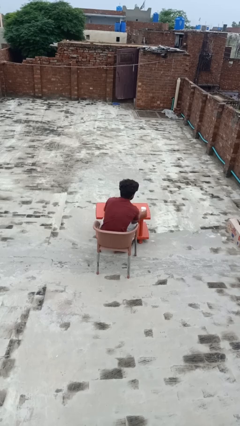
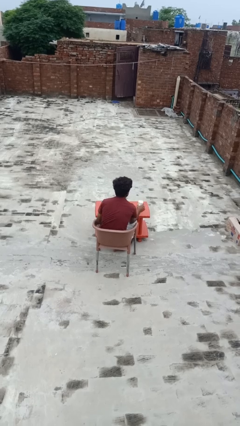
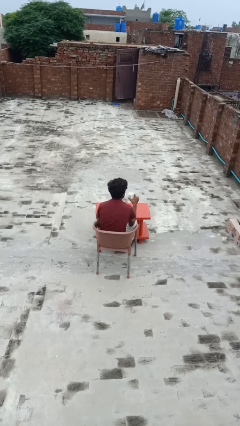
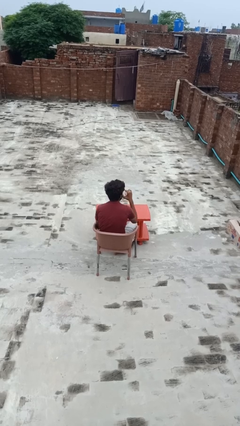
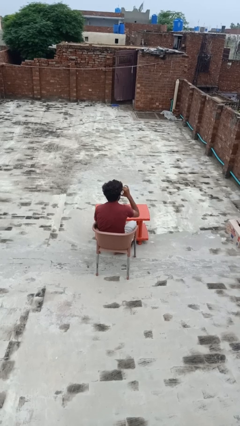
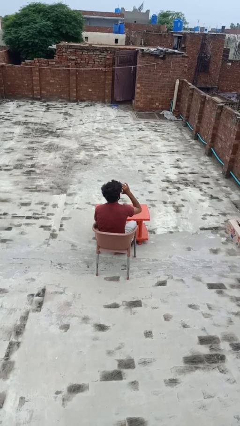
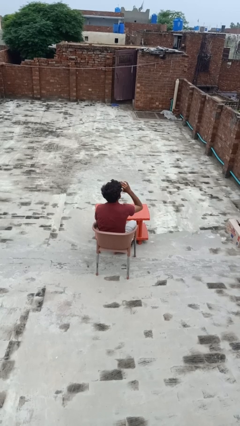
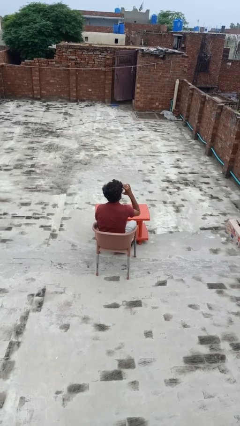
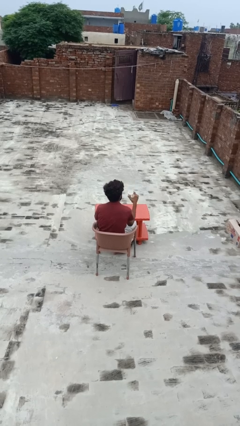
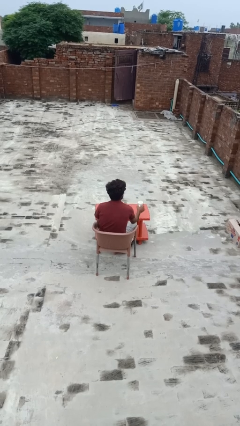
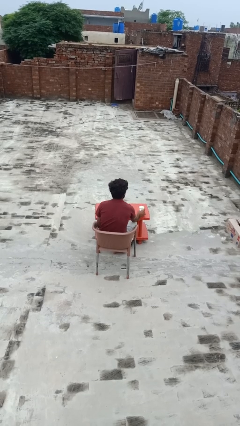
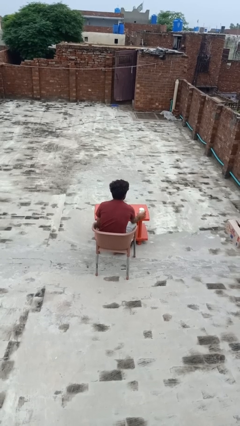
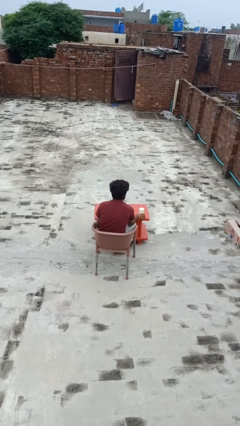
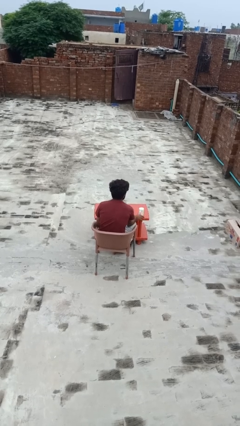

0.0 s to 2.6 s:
person drinks from mug

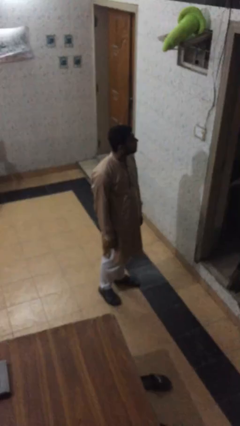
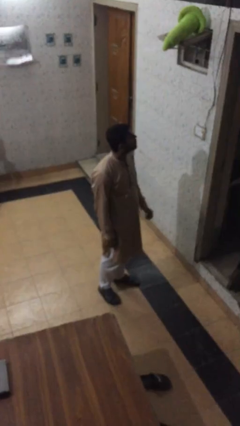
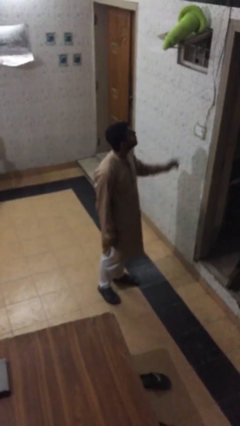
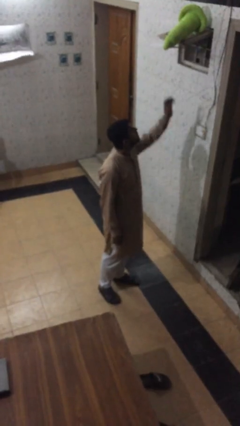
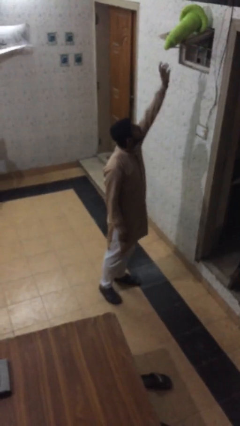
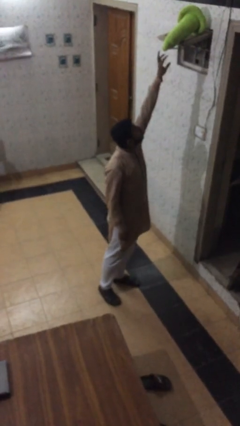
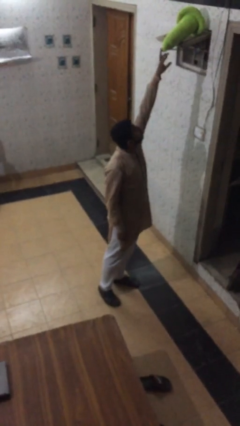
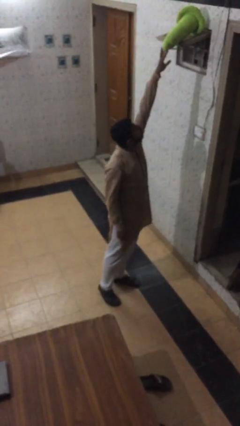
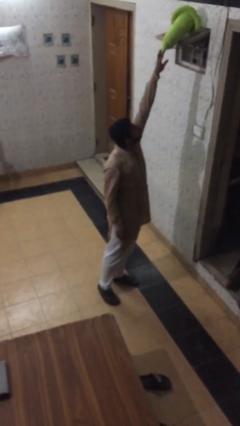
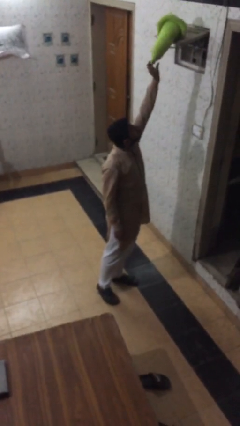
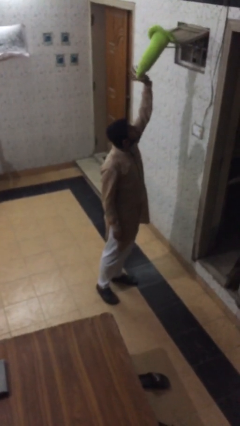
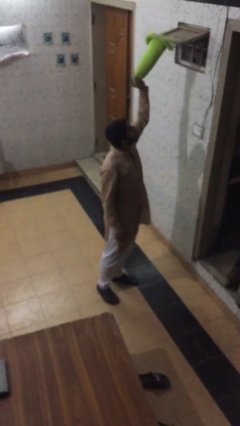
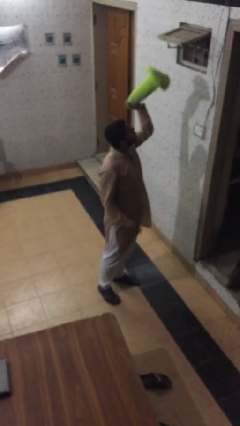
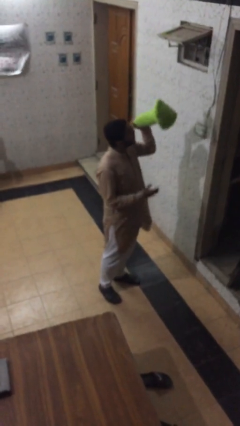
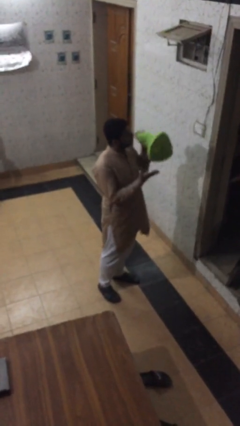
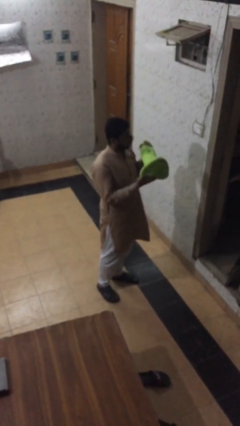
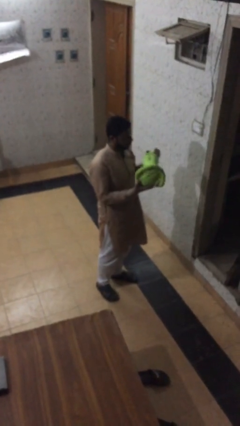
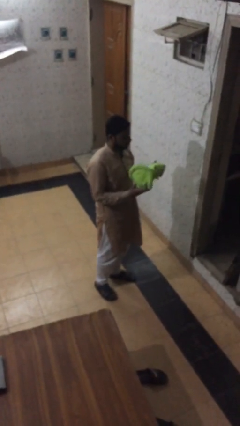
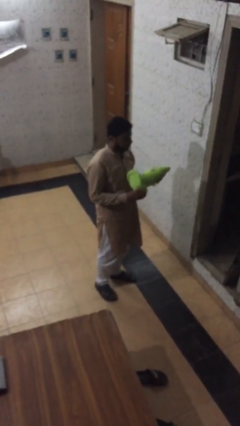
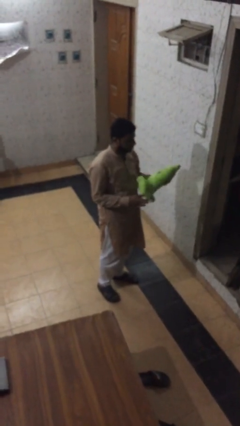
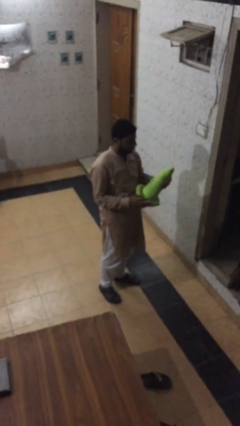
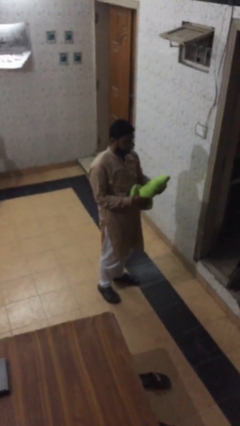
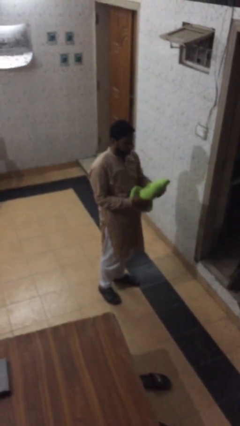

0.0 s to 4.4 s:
person picks up object from shelf

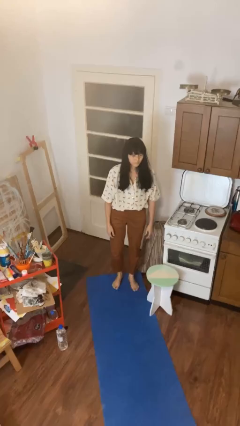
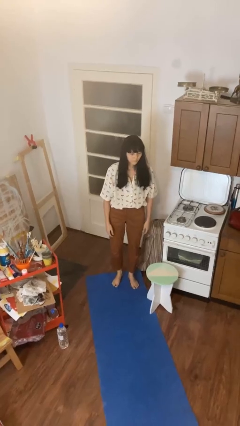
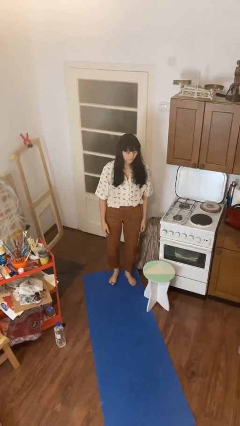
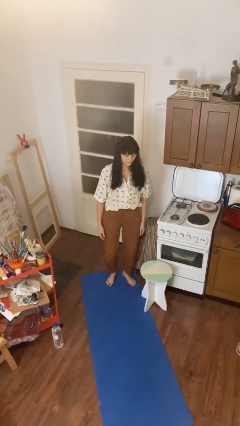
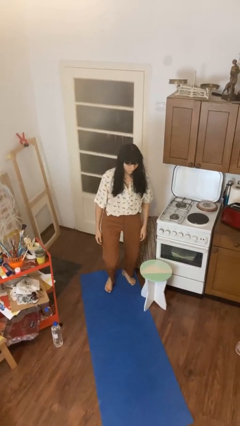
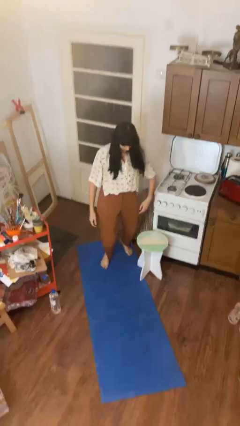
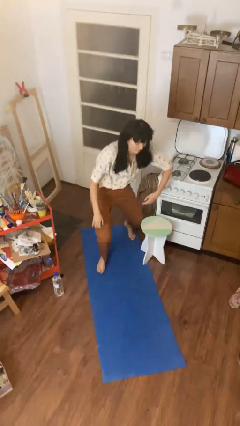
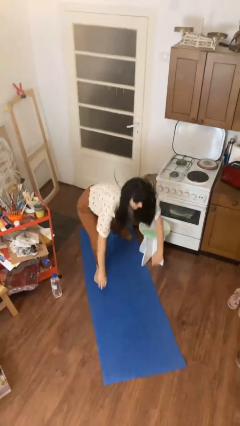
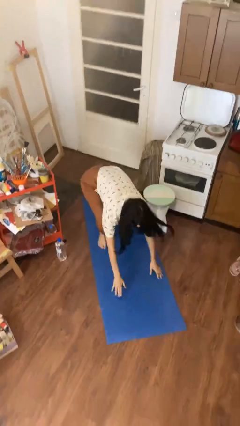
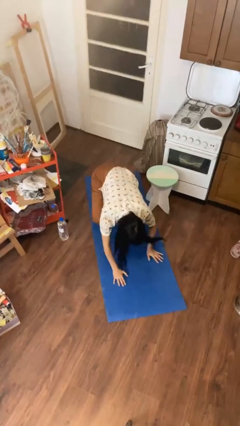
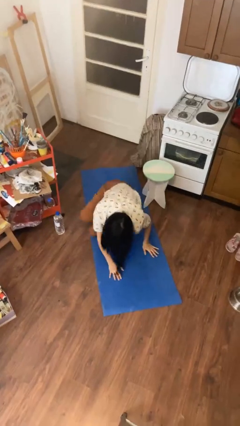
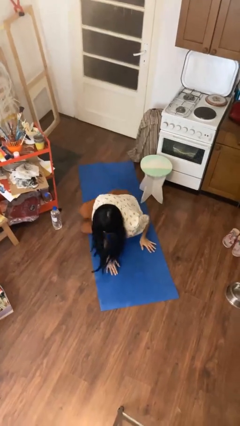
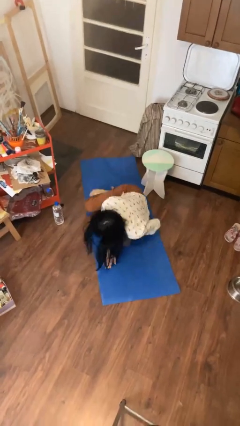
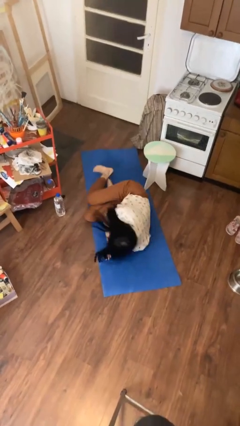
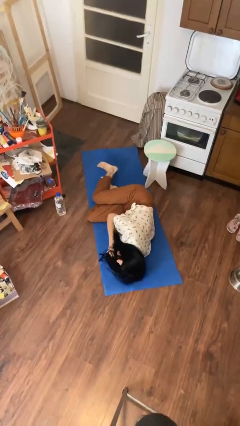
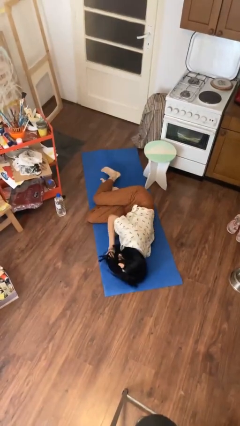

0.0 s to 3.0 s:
person trips on object on floor

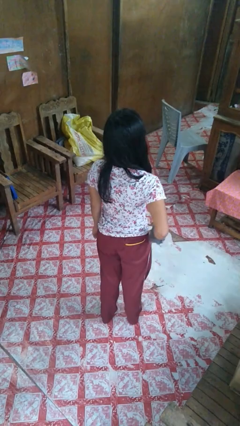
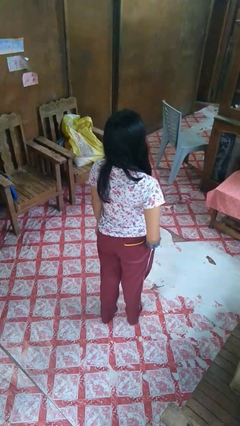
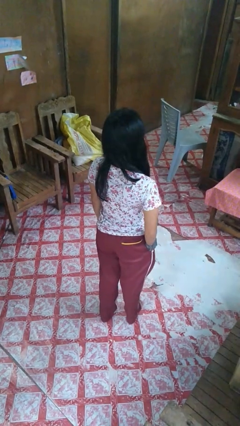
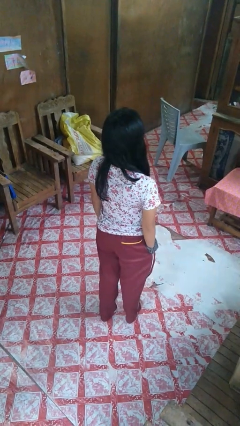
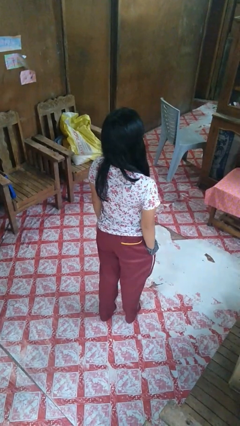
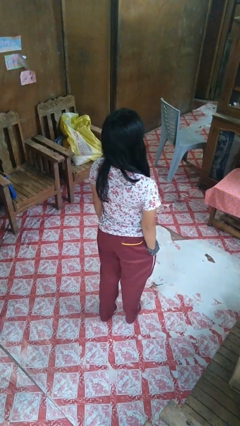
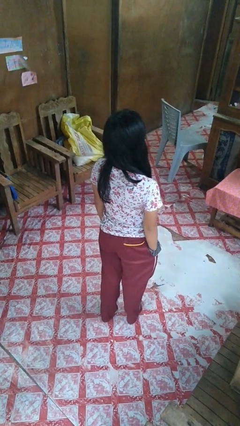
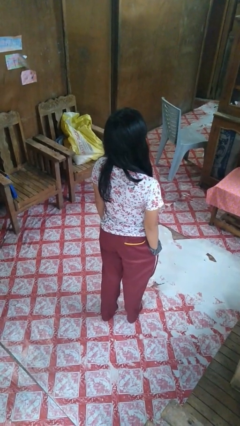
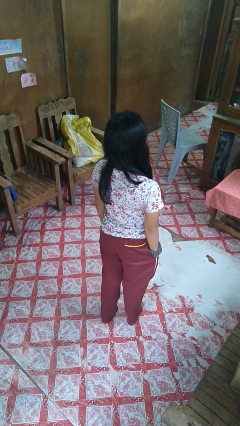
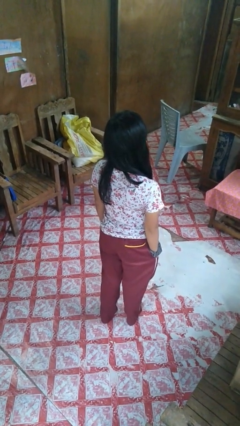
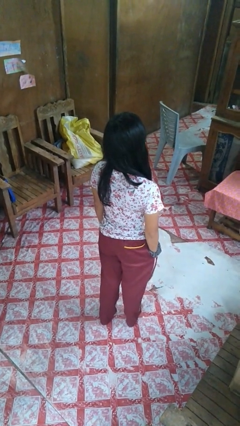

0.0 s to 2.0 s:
person puts hands in back pockets

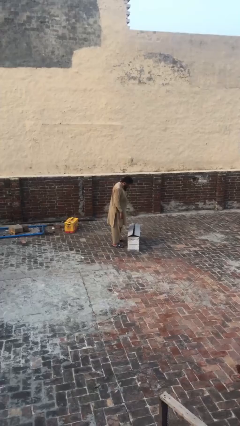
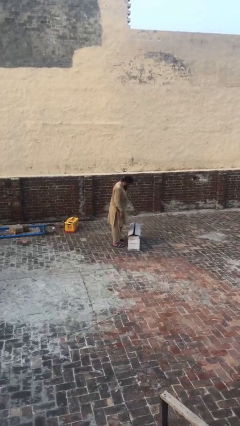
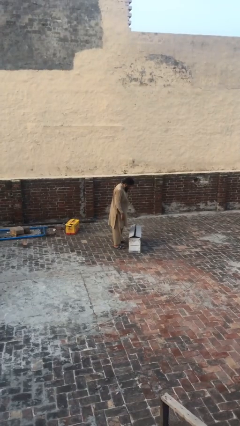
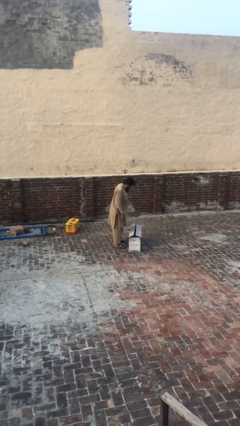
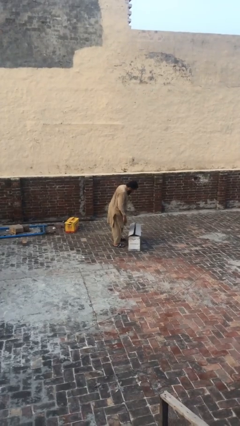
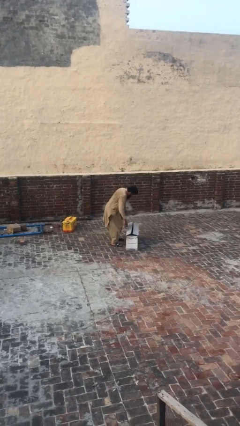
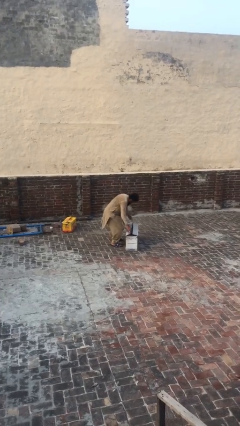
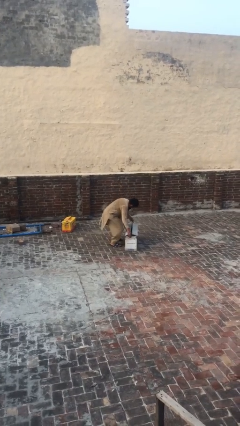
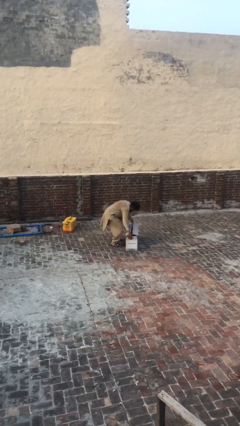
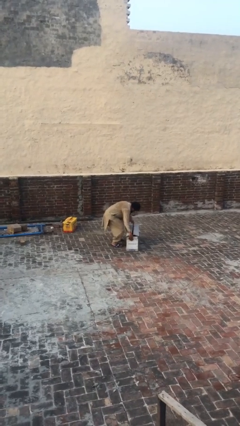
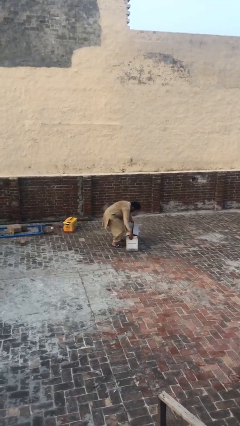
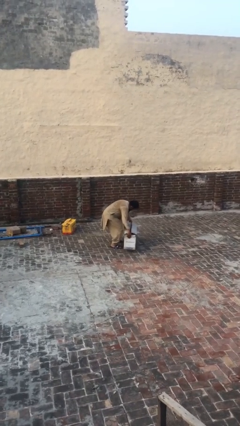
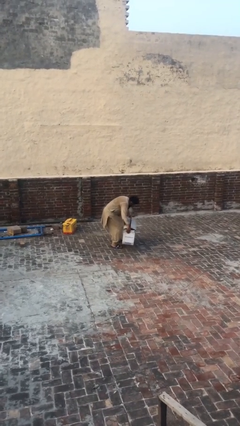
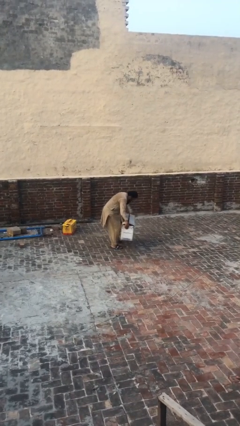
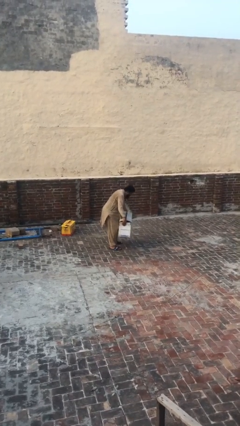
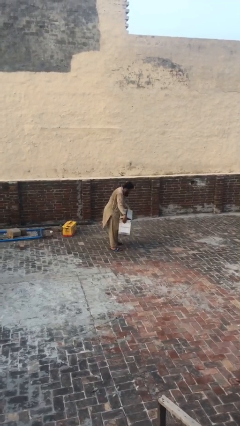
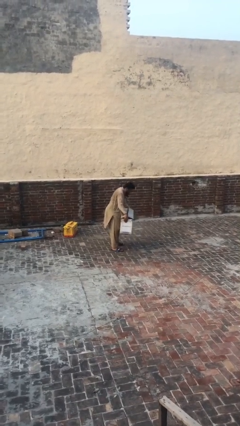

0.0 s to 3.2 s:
person picks up object from floor

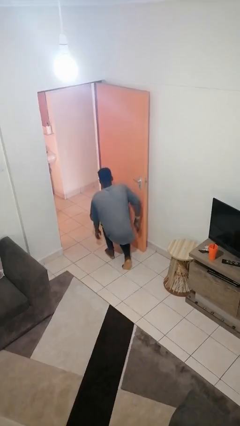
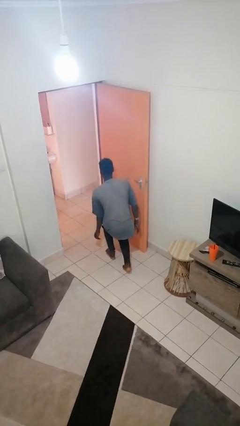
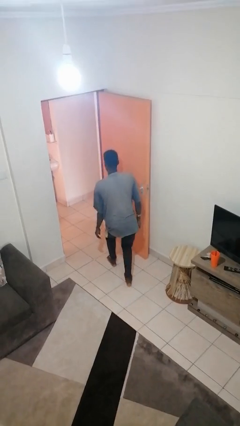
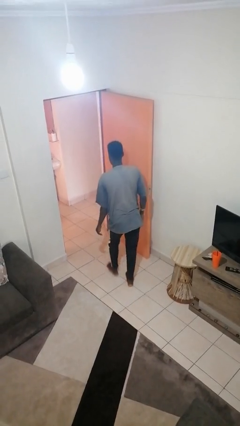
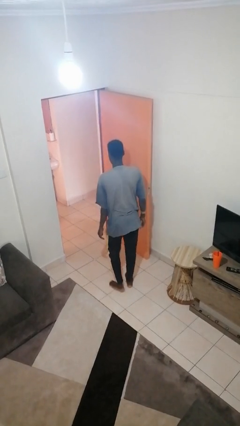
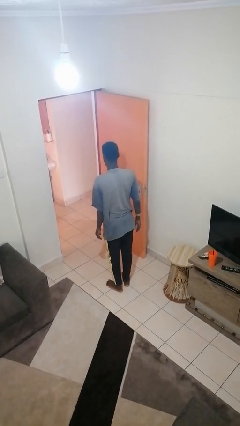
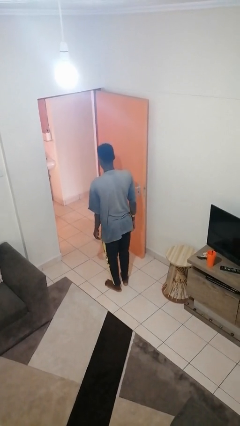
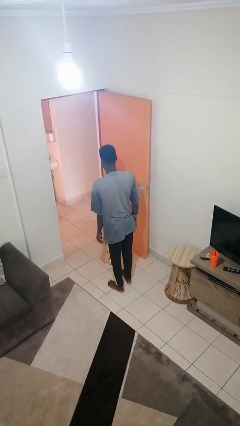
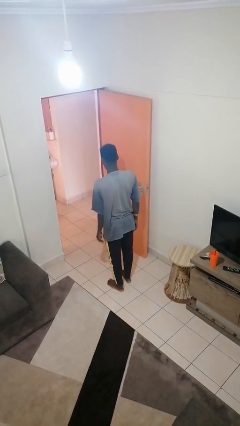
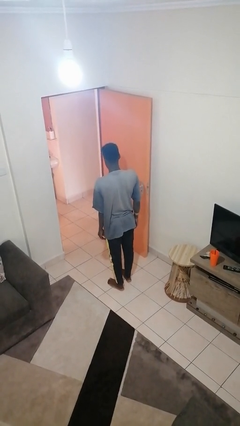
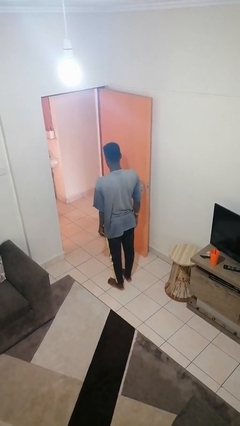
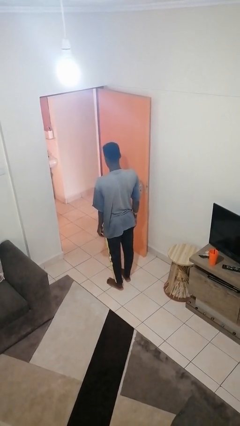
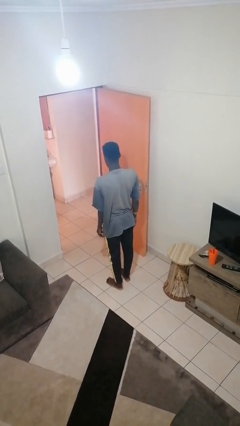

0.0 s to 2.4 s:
person stands up from floor
